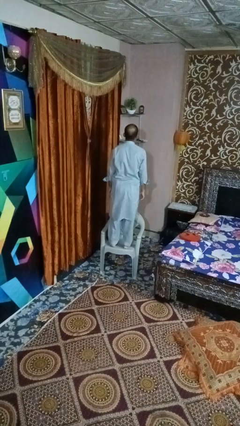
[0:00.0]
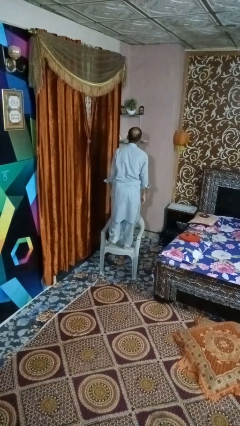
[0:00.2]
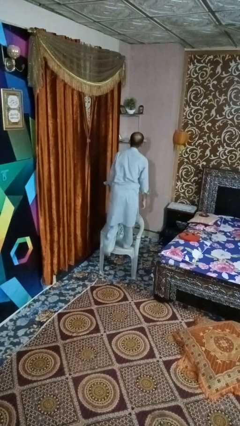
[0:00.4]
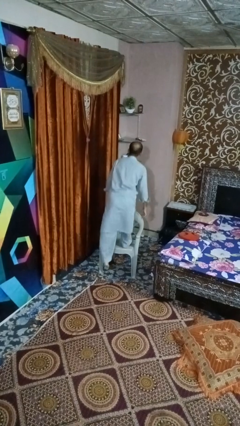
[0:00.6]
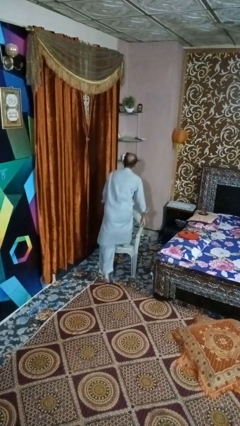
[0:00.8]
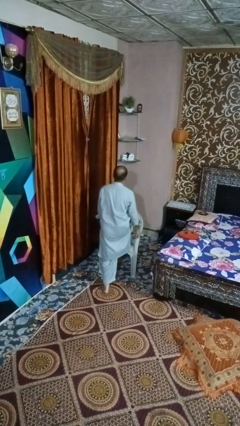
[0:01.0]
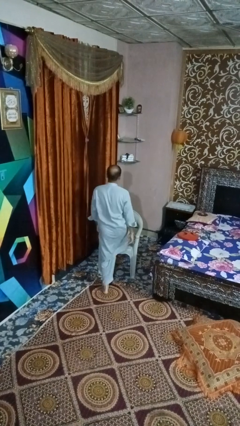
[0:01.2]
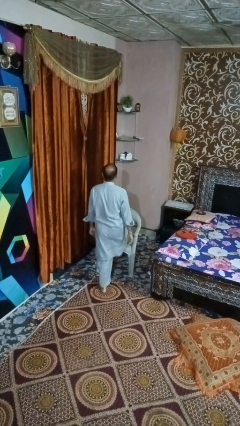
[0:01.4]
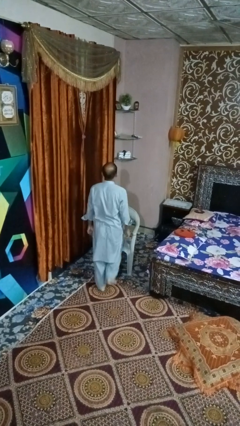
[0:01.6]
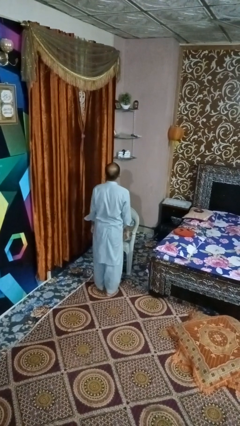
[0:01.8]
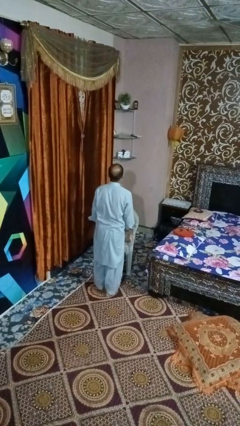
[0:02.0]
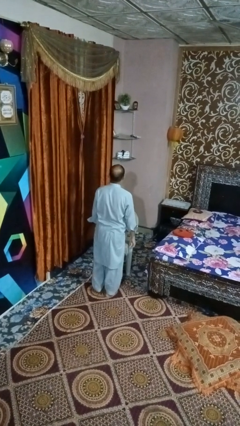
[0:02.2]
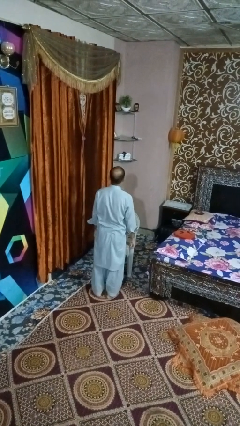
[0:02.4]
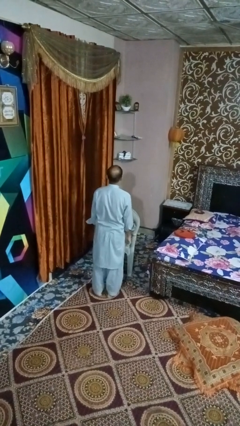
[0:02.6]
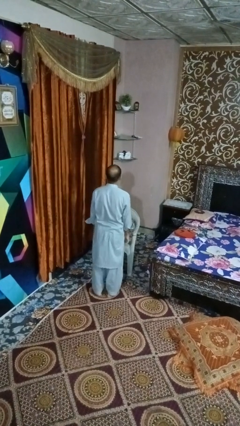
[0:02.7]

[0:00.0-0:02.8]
person climbs off chair

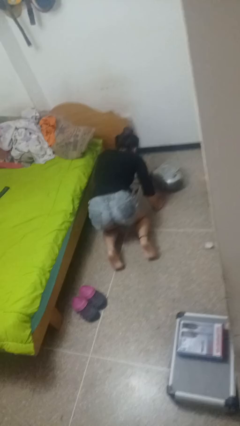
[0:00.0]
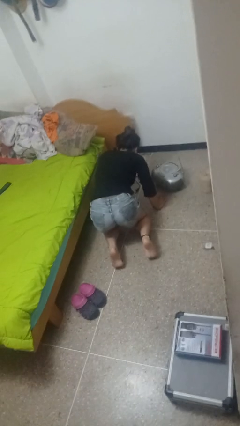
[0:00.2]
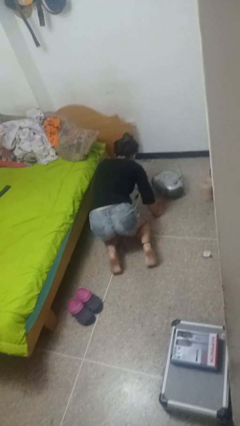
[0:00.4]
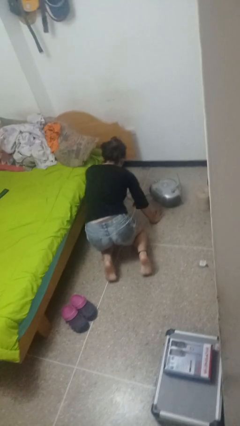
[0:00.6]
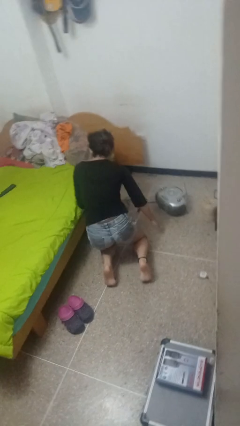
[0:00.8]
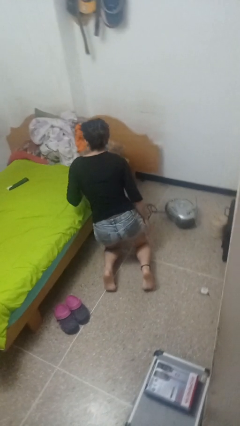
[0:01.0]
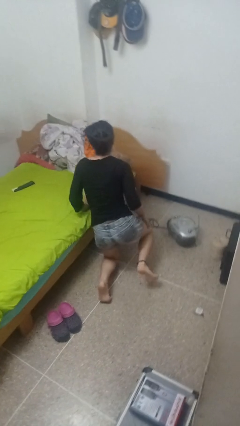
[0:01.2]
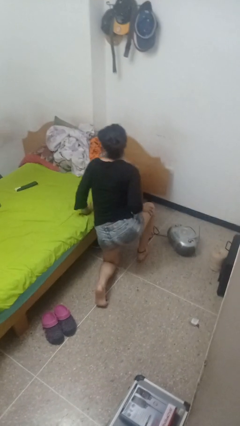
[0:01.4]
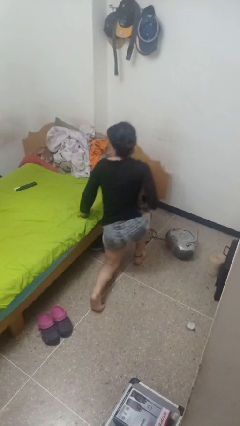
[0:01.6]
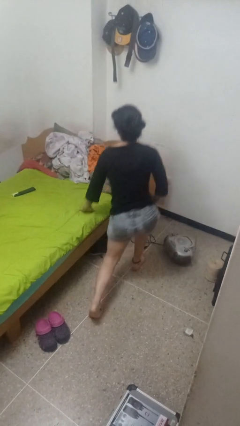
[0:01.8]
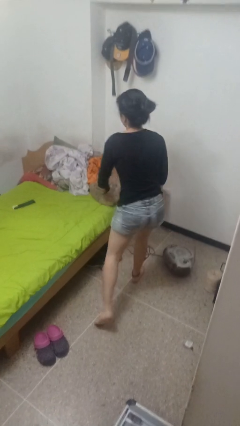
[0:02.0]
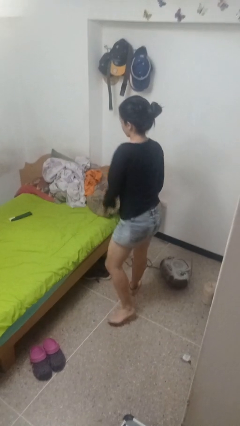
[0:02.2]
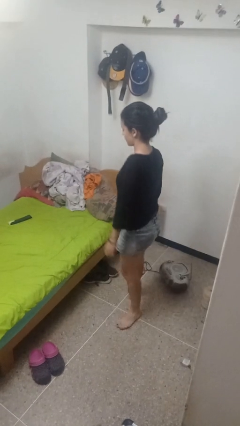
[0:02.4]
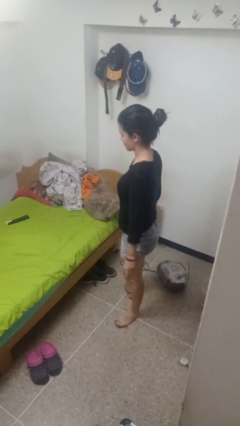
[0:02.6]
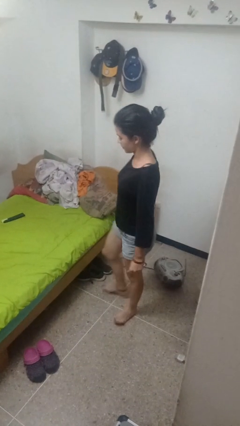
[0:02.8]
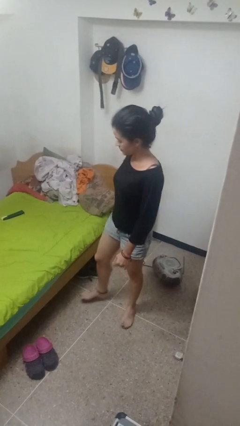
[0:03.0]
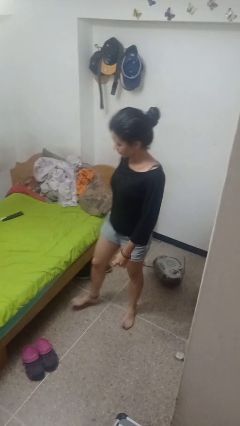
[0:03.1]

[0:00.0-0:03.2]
person stands up from floor

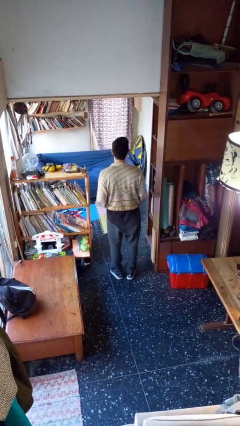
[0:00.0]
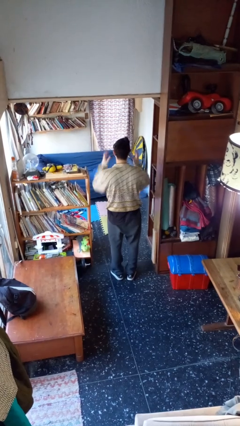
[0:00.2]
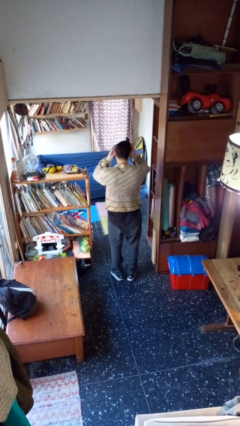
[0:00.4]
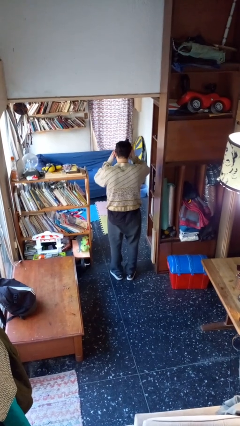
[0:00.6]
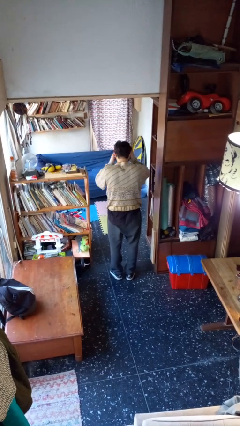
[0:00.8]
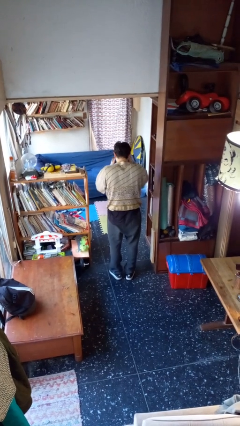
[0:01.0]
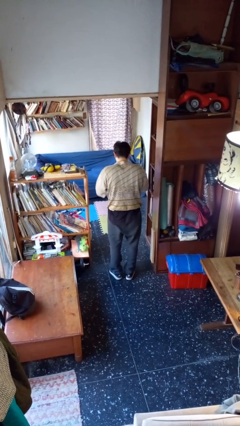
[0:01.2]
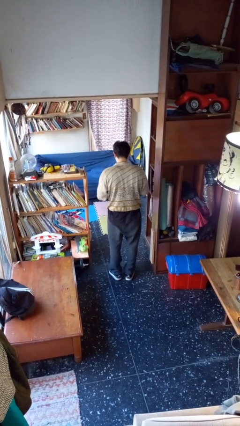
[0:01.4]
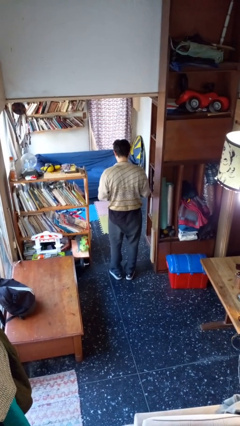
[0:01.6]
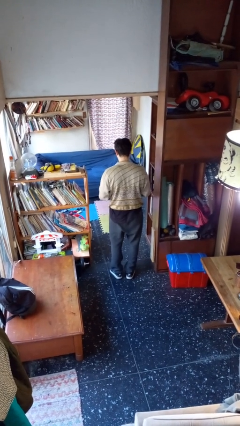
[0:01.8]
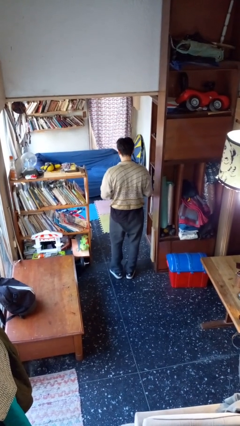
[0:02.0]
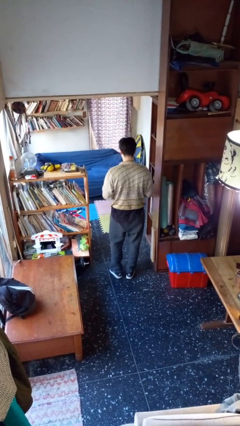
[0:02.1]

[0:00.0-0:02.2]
person takes off facemask

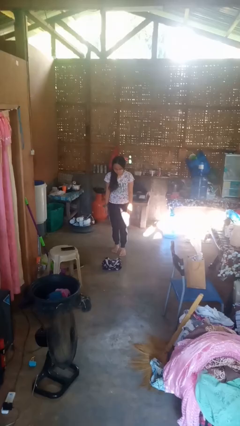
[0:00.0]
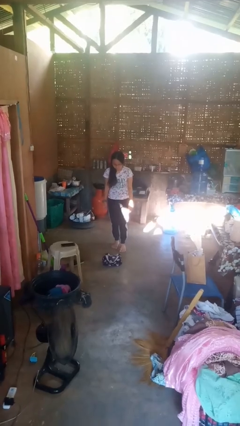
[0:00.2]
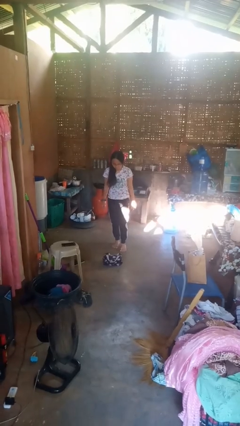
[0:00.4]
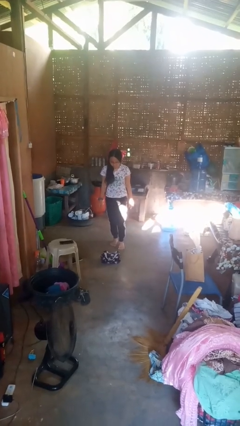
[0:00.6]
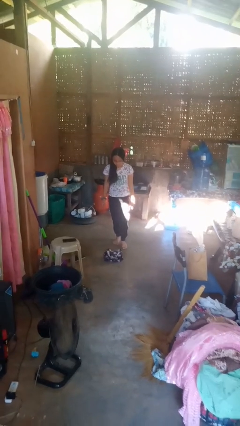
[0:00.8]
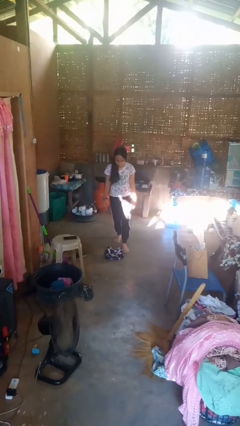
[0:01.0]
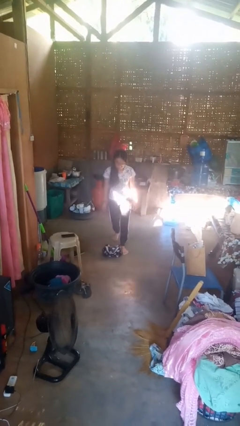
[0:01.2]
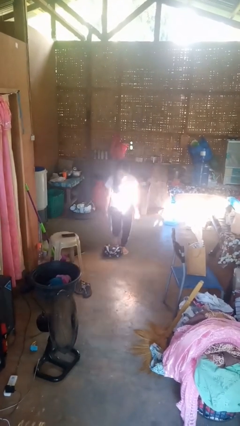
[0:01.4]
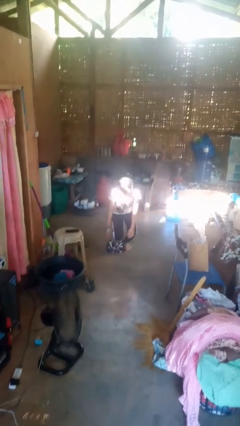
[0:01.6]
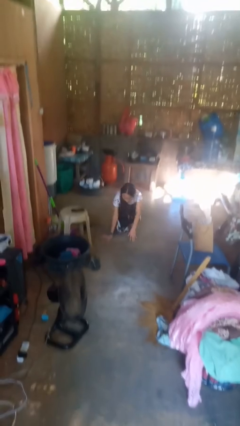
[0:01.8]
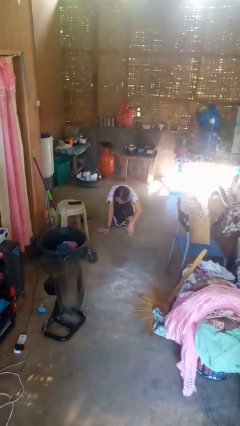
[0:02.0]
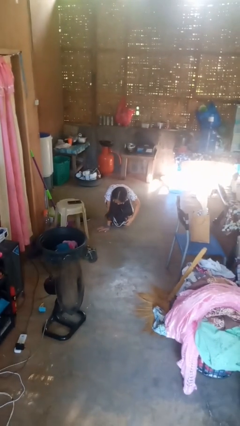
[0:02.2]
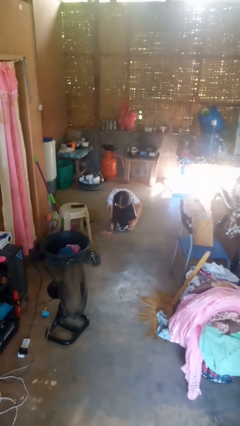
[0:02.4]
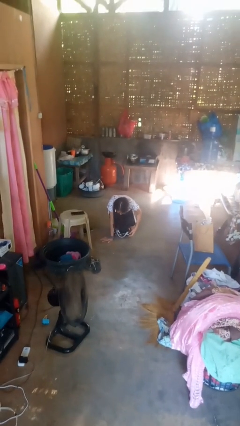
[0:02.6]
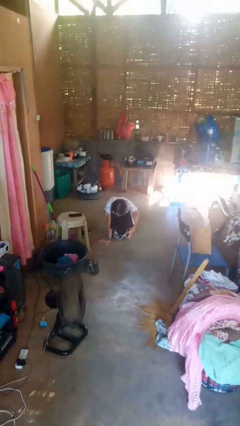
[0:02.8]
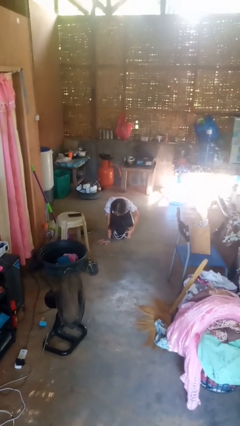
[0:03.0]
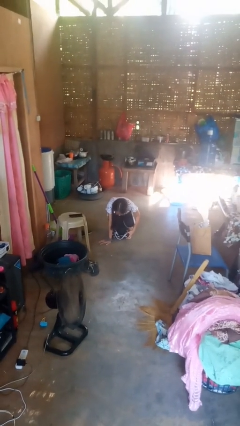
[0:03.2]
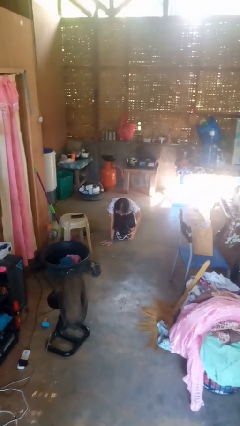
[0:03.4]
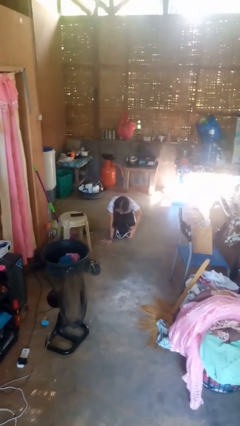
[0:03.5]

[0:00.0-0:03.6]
person trips on object on floor

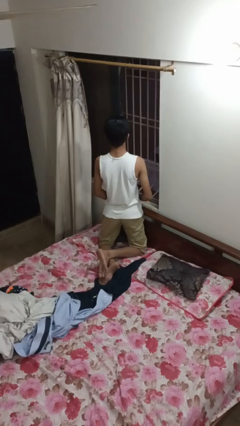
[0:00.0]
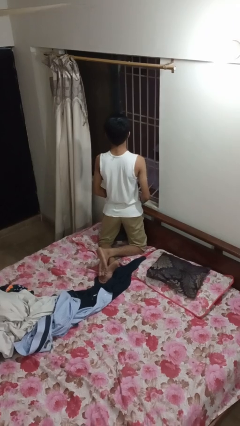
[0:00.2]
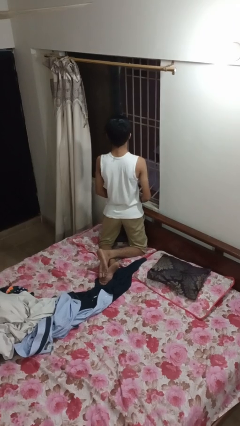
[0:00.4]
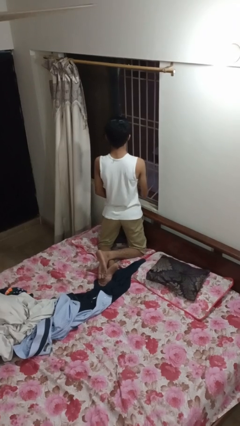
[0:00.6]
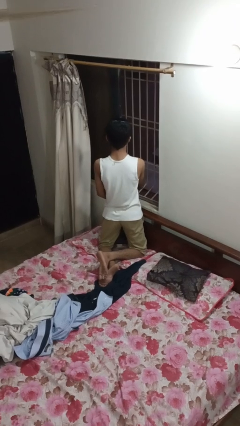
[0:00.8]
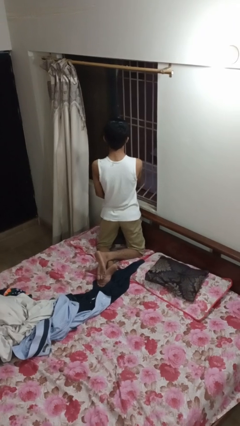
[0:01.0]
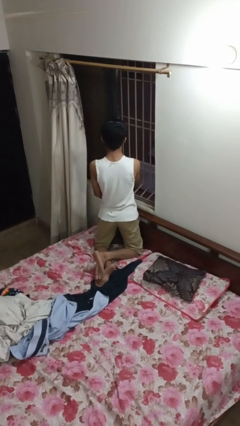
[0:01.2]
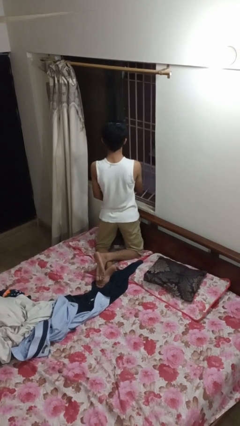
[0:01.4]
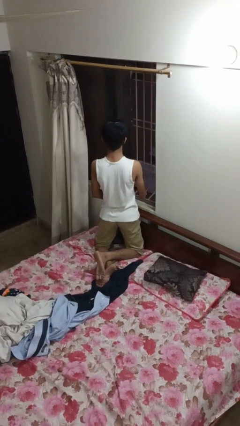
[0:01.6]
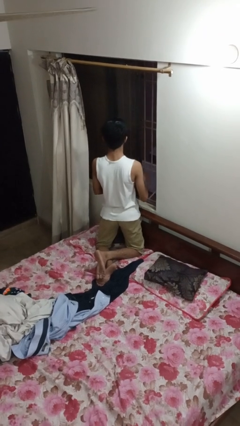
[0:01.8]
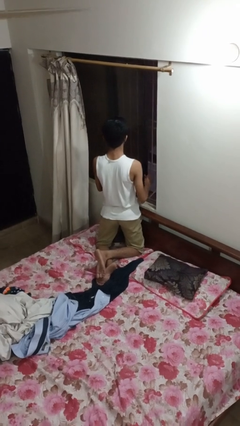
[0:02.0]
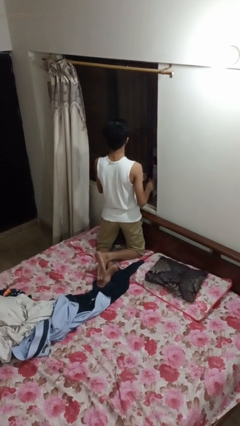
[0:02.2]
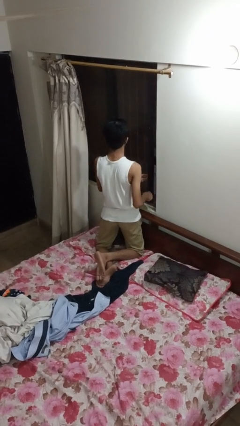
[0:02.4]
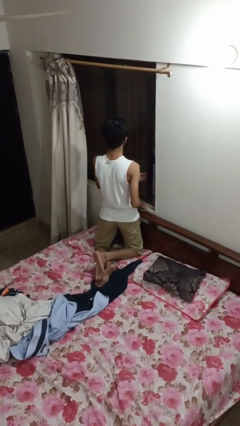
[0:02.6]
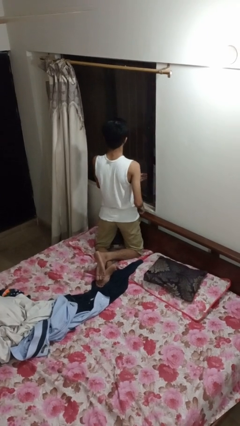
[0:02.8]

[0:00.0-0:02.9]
person closes home window

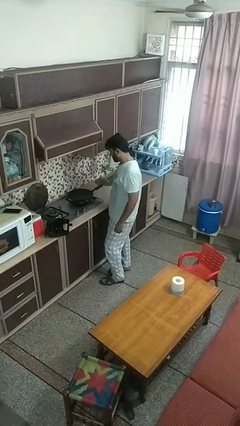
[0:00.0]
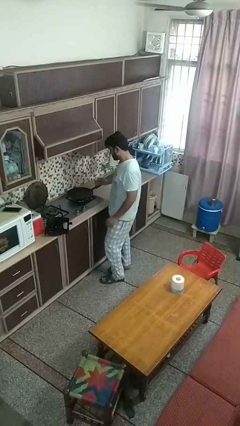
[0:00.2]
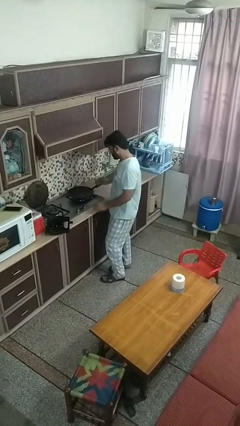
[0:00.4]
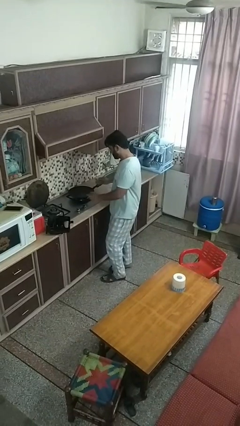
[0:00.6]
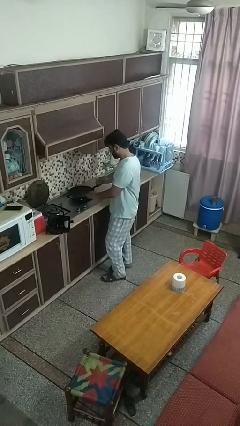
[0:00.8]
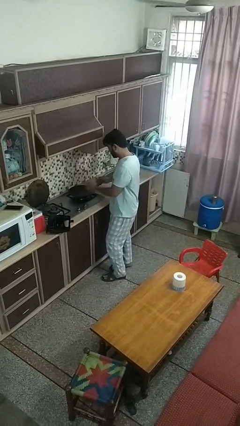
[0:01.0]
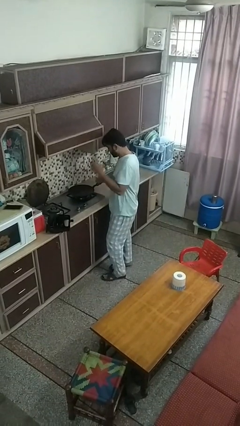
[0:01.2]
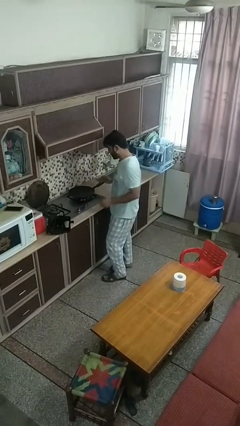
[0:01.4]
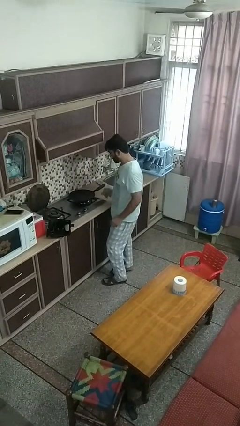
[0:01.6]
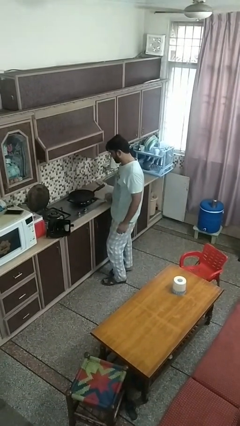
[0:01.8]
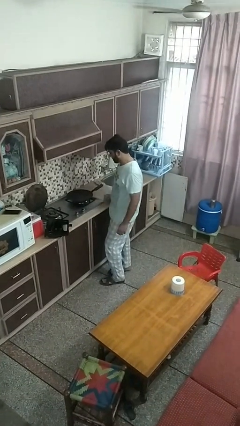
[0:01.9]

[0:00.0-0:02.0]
person burns hand

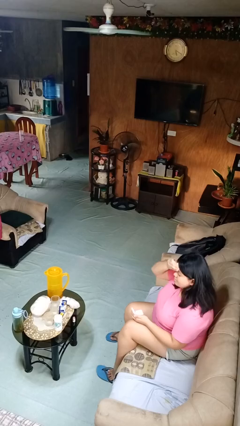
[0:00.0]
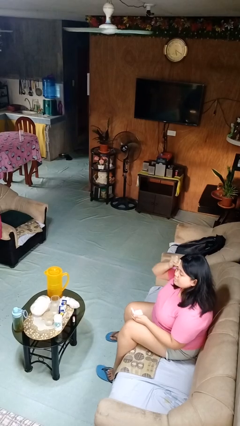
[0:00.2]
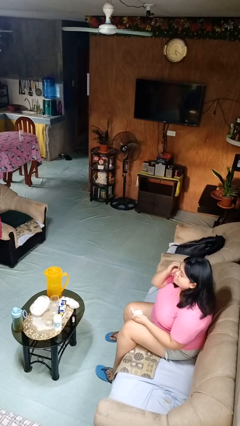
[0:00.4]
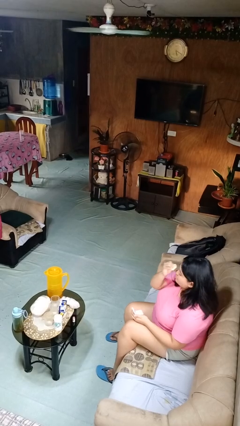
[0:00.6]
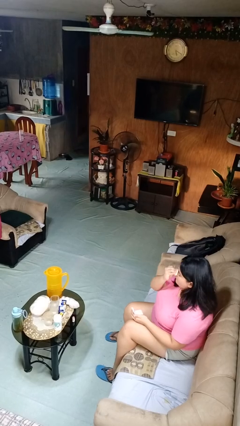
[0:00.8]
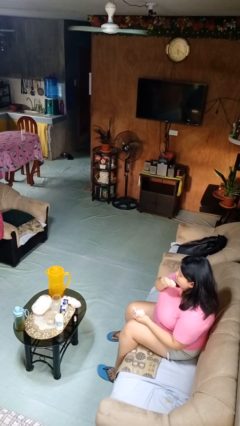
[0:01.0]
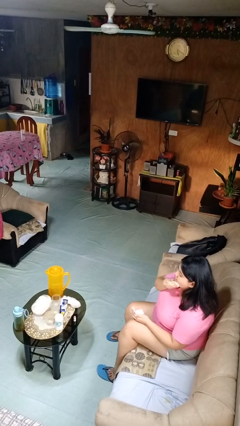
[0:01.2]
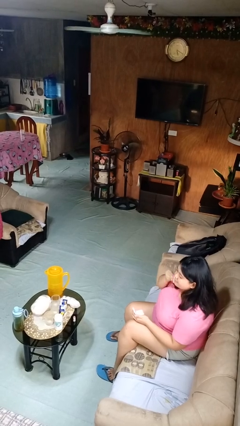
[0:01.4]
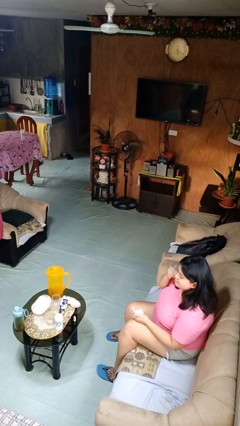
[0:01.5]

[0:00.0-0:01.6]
person applies foundation makeup
